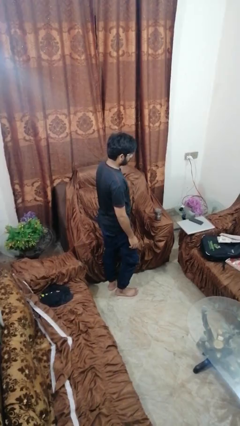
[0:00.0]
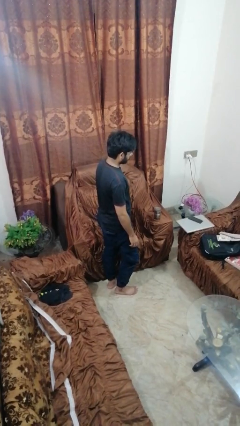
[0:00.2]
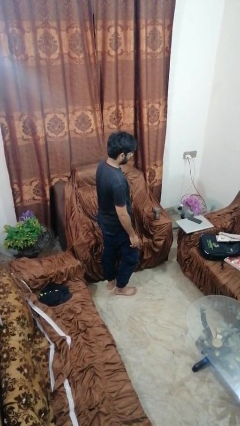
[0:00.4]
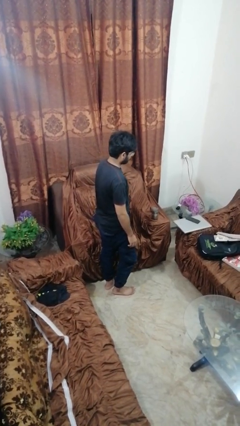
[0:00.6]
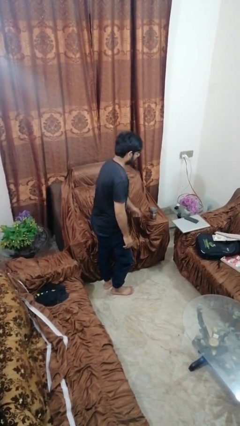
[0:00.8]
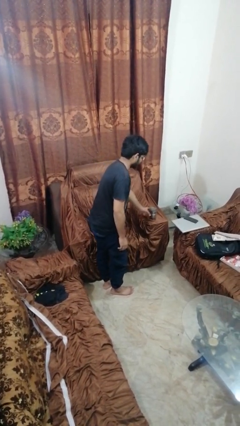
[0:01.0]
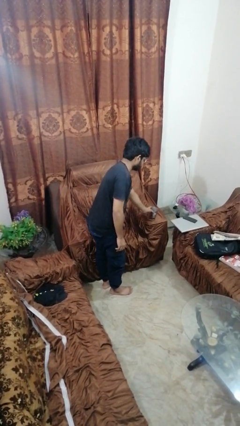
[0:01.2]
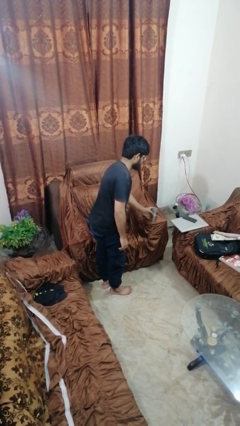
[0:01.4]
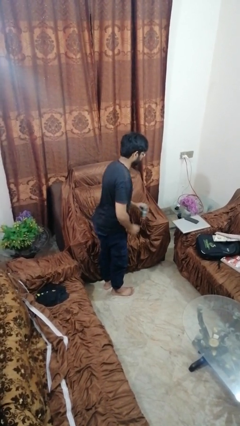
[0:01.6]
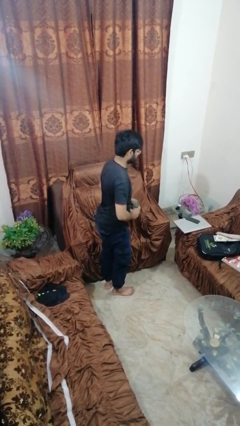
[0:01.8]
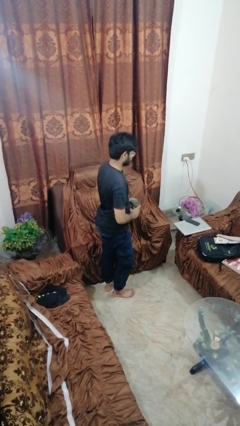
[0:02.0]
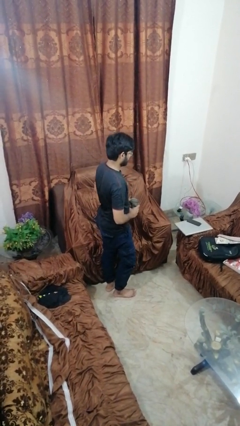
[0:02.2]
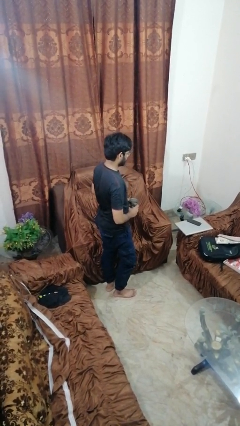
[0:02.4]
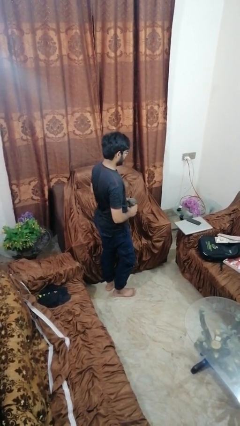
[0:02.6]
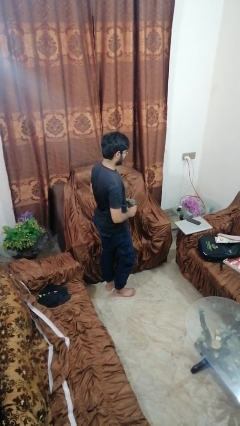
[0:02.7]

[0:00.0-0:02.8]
person picks up object from couch

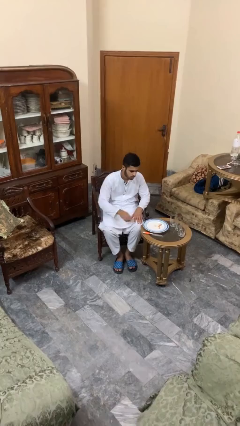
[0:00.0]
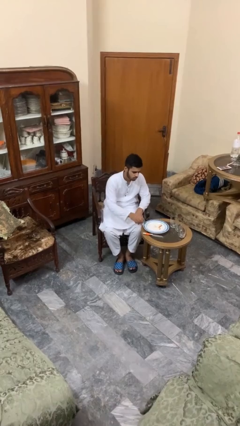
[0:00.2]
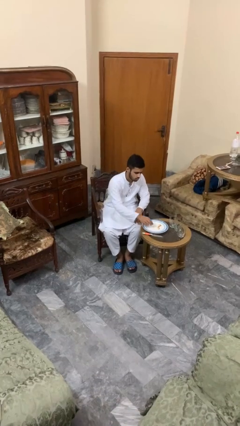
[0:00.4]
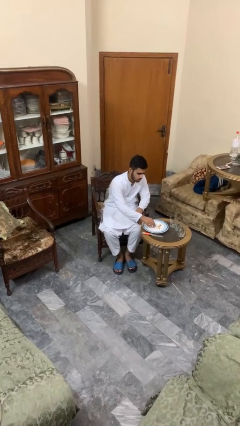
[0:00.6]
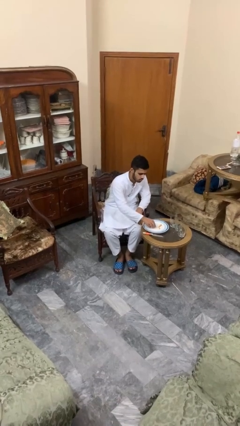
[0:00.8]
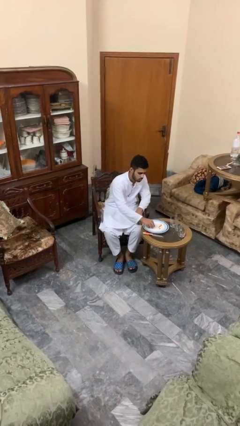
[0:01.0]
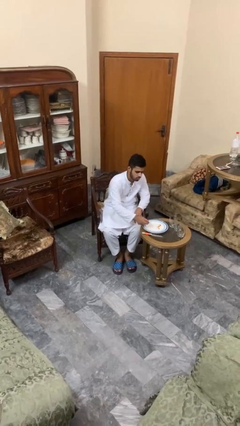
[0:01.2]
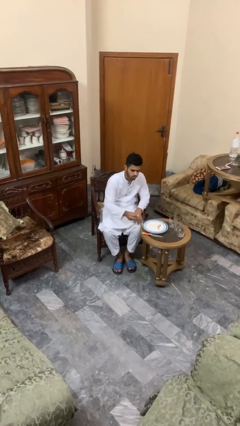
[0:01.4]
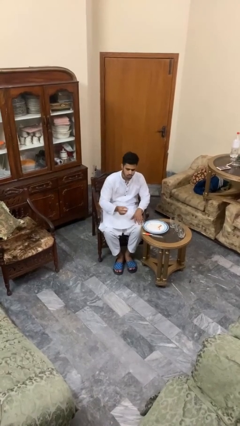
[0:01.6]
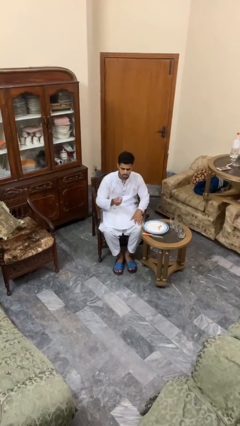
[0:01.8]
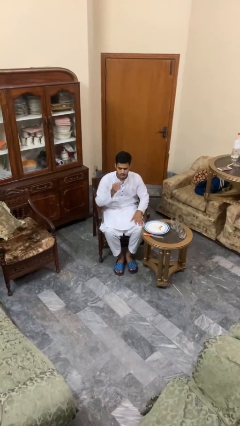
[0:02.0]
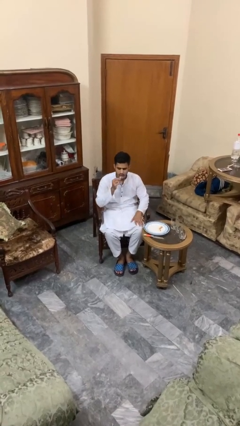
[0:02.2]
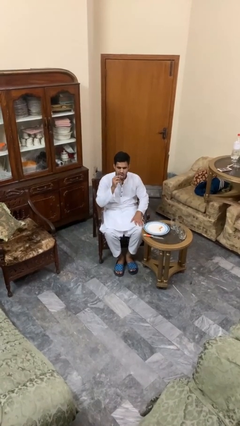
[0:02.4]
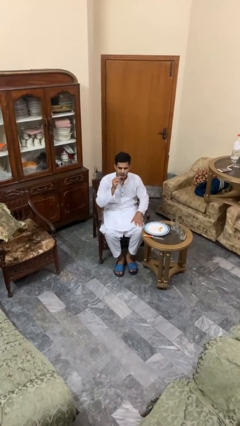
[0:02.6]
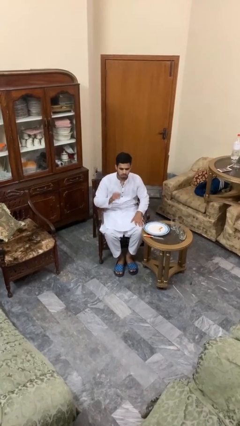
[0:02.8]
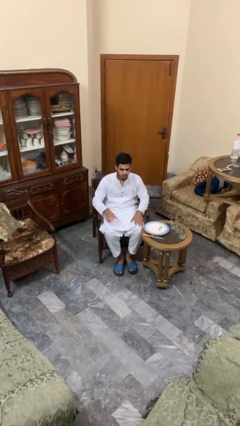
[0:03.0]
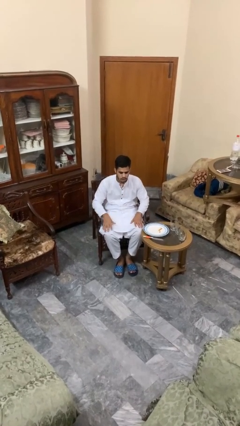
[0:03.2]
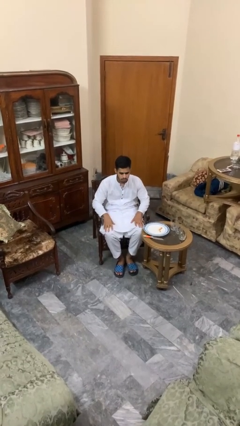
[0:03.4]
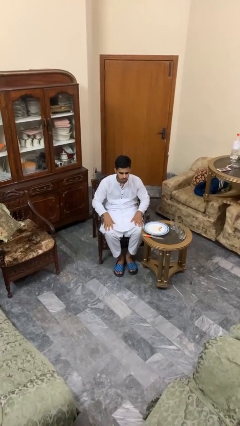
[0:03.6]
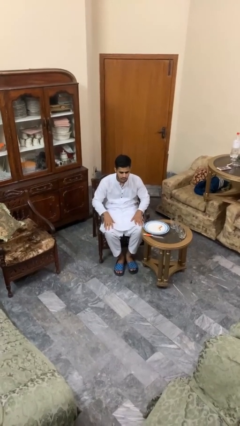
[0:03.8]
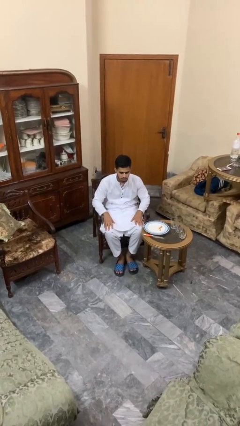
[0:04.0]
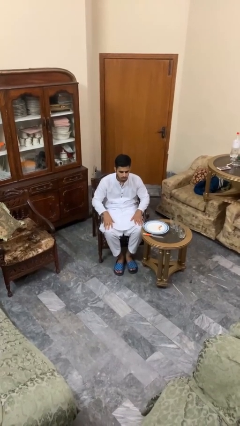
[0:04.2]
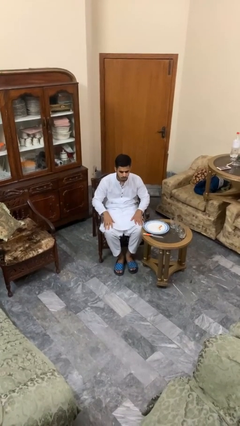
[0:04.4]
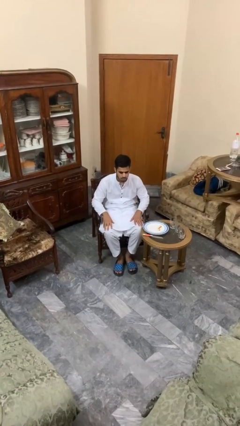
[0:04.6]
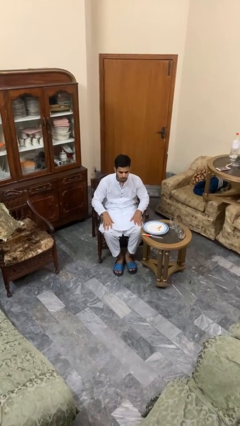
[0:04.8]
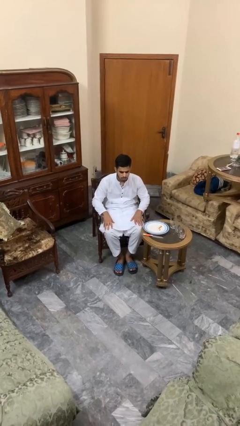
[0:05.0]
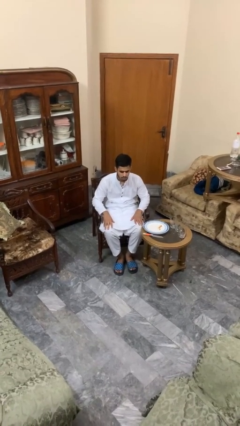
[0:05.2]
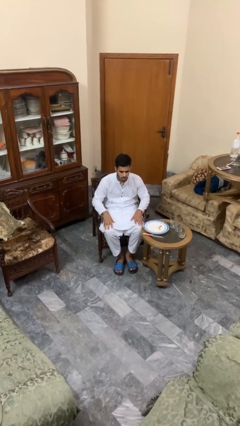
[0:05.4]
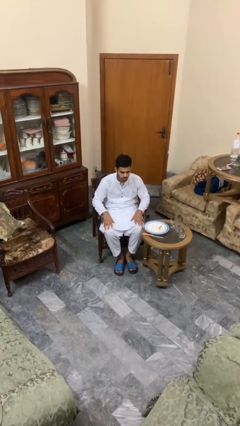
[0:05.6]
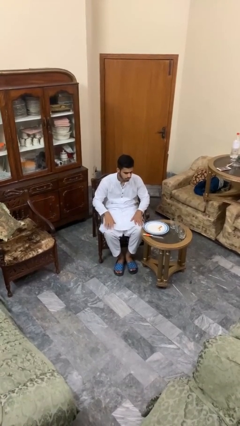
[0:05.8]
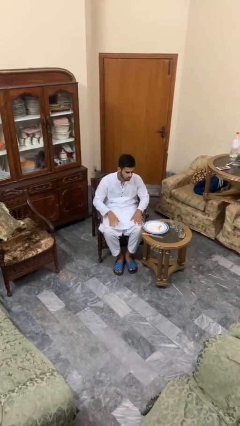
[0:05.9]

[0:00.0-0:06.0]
person eats with hands

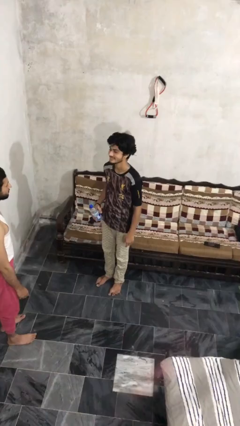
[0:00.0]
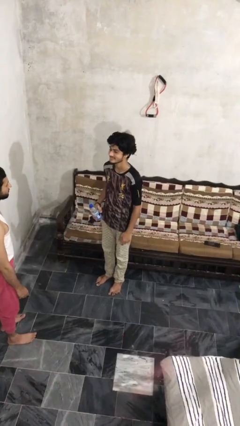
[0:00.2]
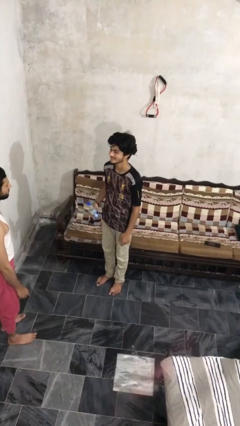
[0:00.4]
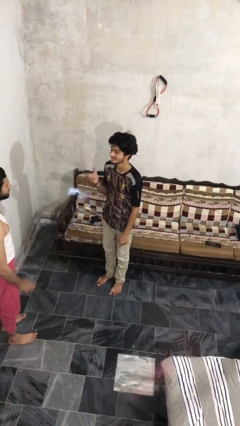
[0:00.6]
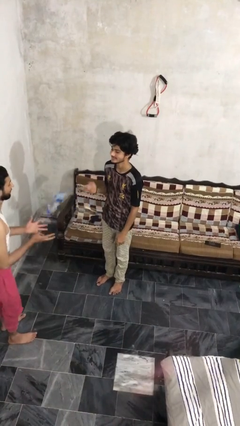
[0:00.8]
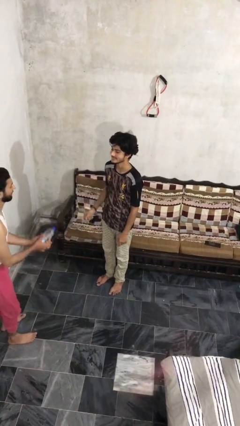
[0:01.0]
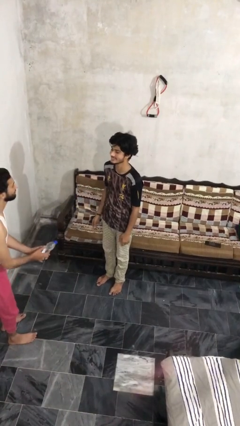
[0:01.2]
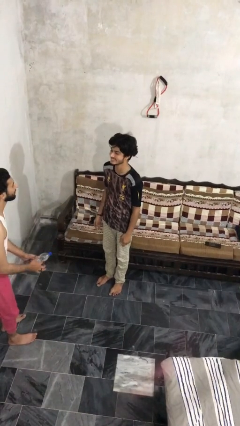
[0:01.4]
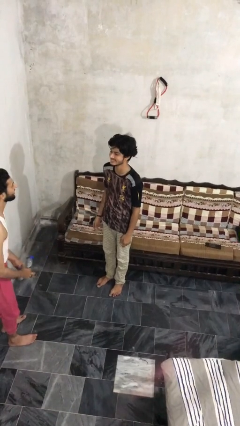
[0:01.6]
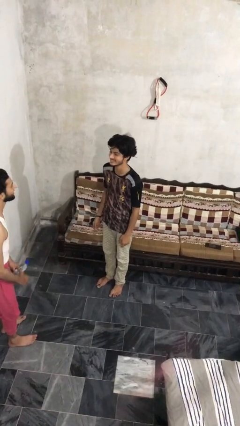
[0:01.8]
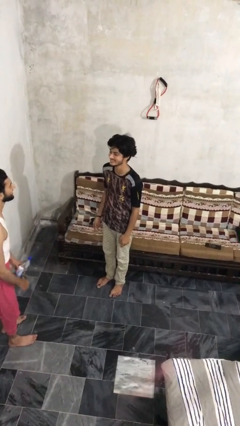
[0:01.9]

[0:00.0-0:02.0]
person throws object to person

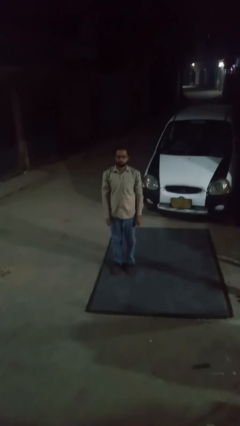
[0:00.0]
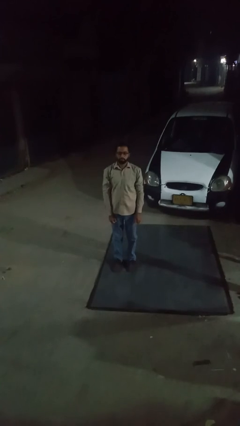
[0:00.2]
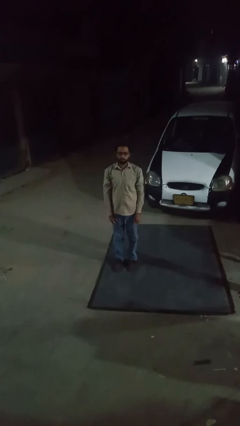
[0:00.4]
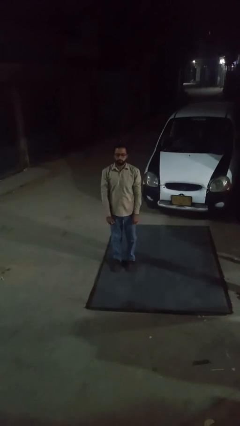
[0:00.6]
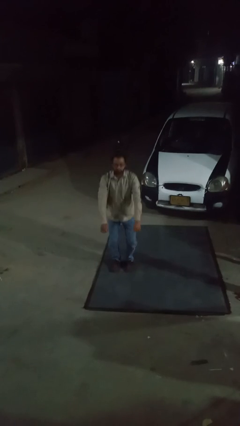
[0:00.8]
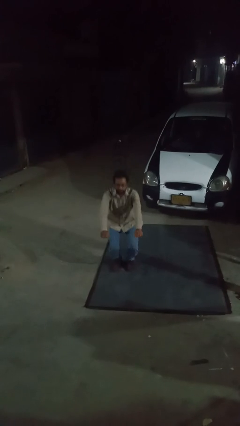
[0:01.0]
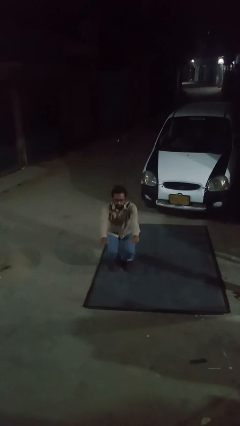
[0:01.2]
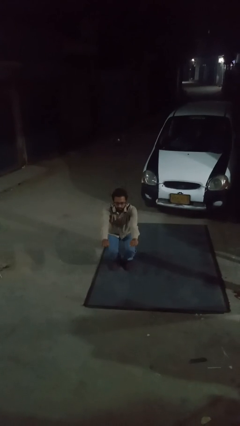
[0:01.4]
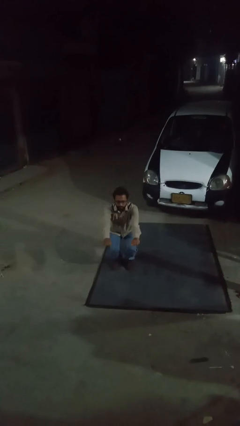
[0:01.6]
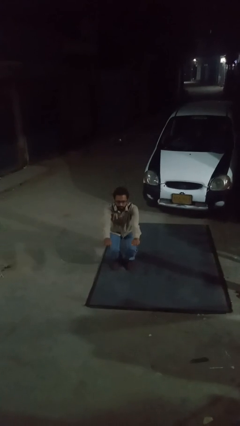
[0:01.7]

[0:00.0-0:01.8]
person squats

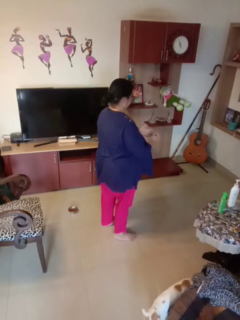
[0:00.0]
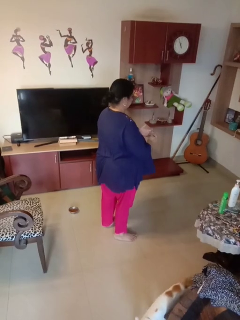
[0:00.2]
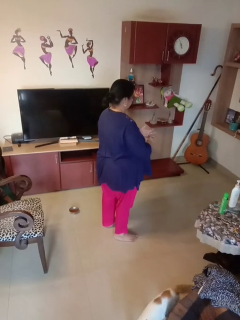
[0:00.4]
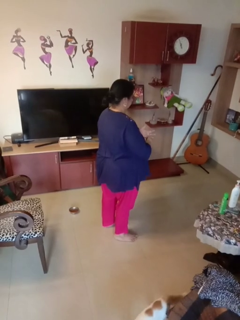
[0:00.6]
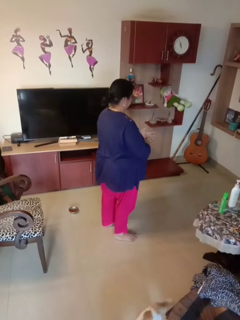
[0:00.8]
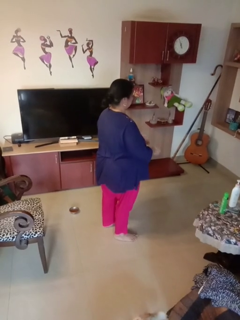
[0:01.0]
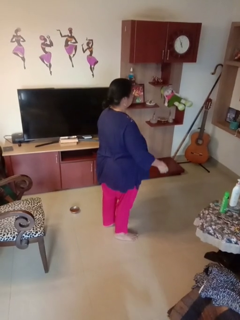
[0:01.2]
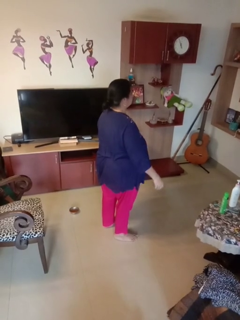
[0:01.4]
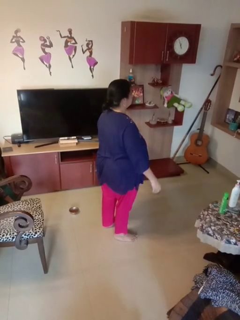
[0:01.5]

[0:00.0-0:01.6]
person puts on ring

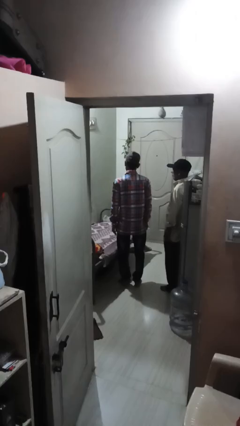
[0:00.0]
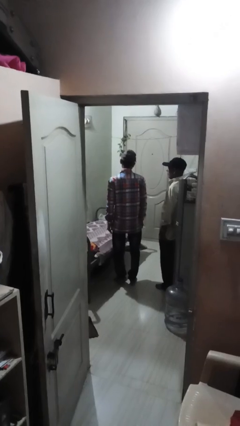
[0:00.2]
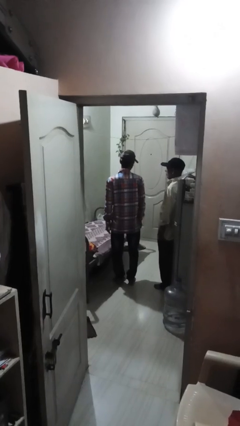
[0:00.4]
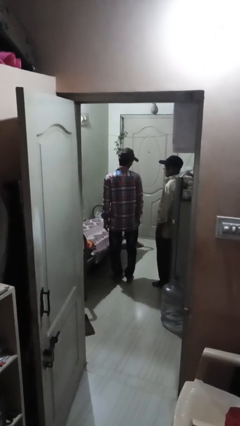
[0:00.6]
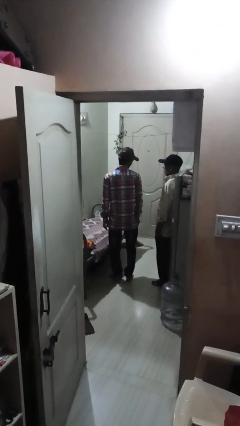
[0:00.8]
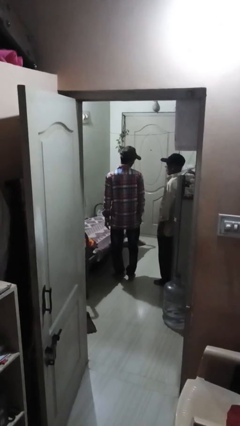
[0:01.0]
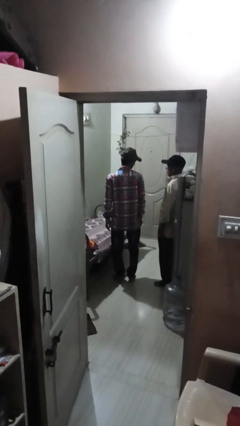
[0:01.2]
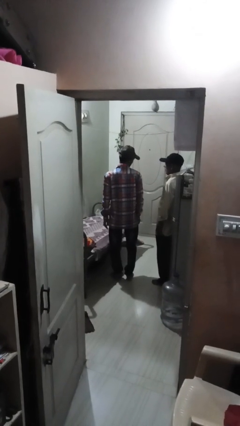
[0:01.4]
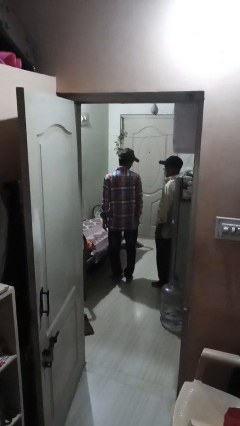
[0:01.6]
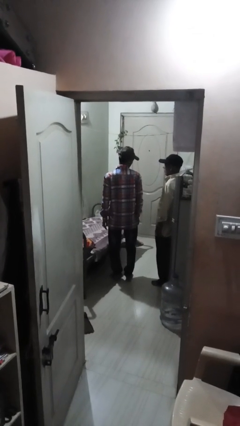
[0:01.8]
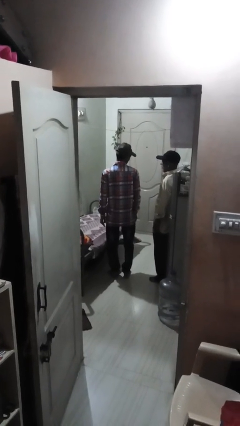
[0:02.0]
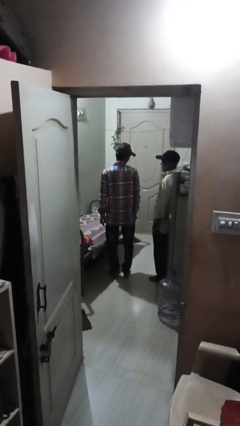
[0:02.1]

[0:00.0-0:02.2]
person looks over shoulder

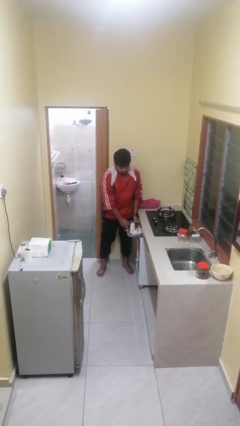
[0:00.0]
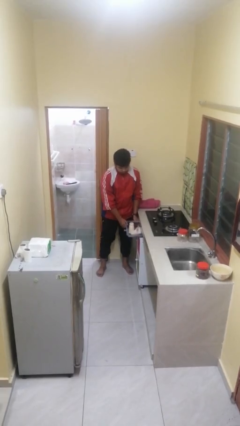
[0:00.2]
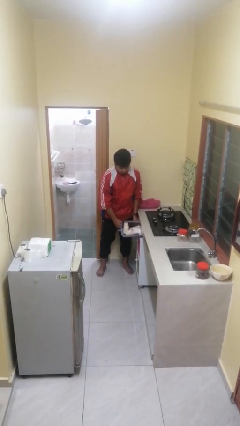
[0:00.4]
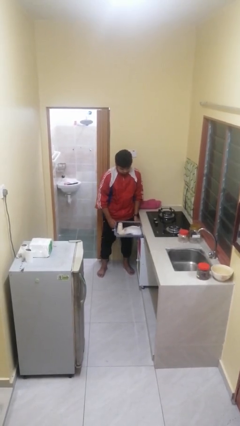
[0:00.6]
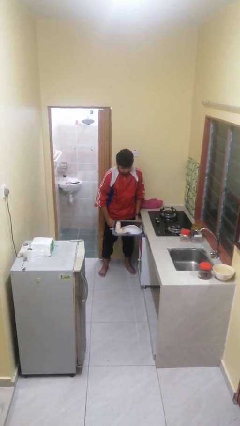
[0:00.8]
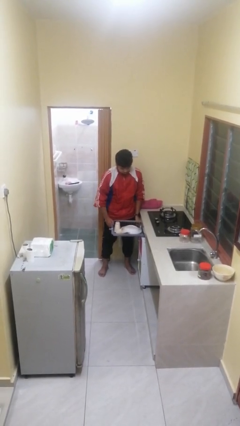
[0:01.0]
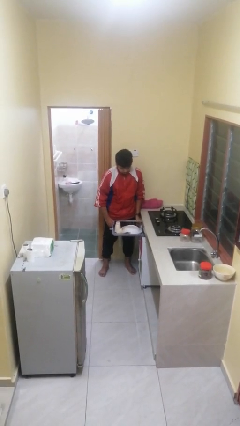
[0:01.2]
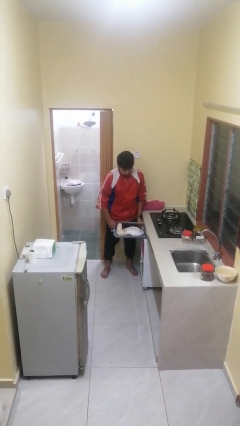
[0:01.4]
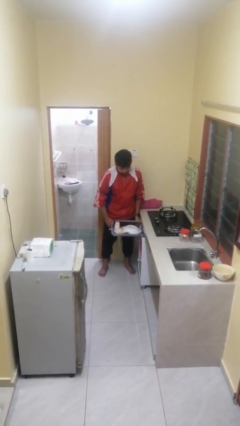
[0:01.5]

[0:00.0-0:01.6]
person opens kitchen drawer
